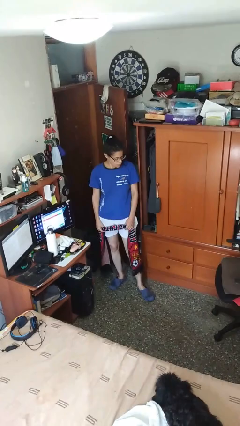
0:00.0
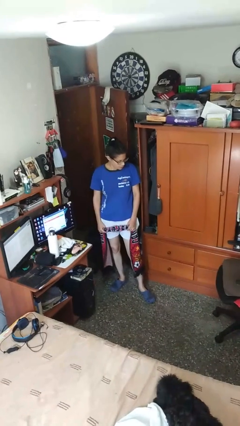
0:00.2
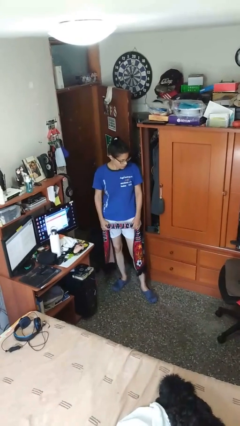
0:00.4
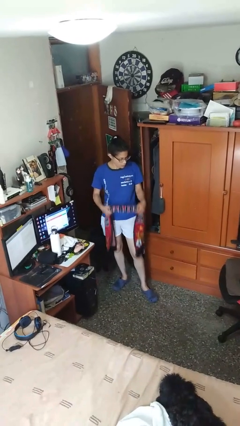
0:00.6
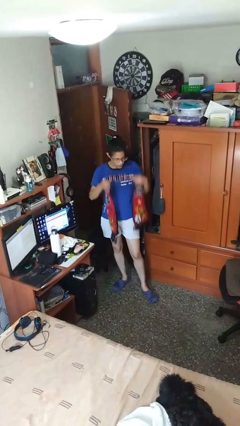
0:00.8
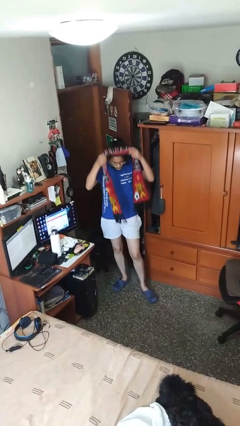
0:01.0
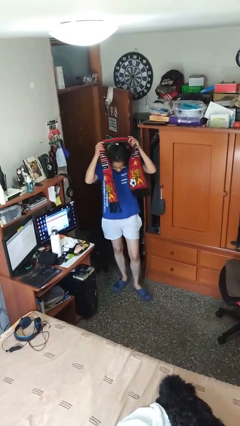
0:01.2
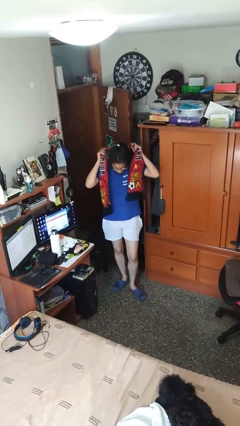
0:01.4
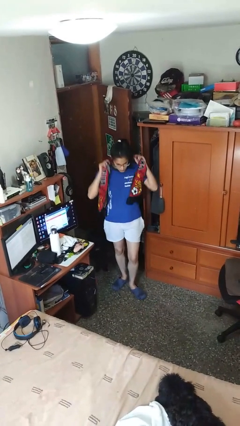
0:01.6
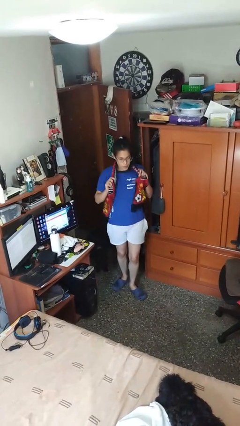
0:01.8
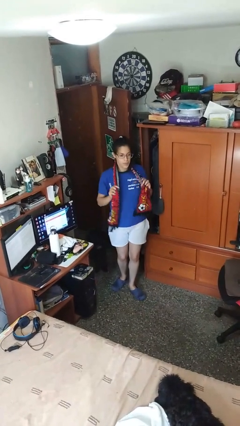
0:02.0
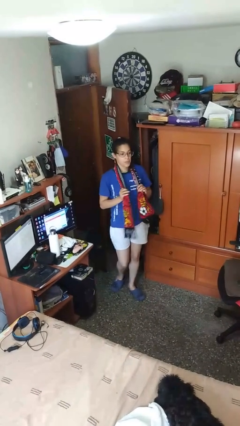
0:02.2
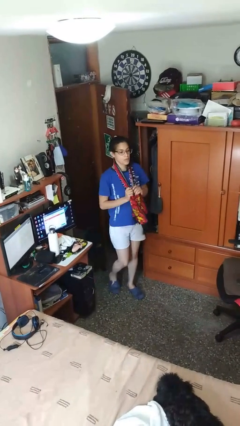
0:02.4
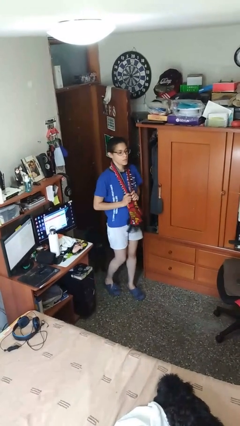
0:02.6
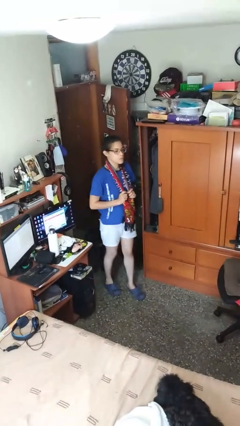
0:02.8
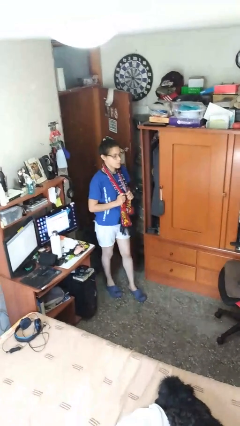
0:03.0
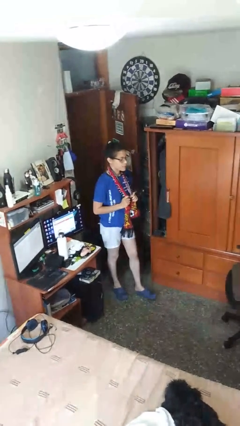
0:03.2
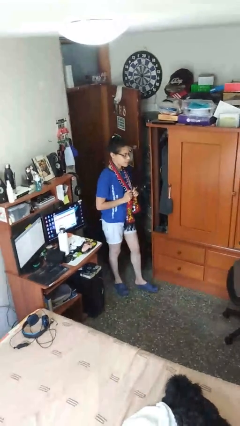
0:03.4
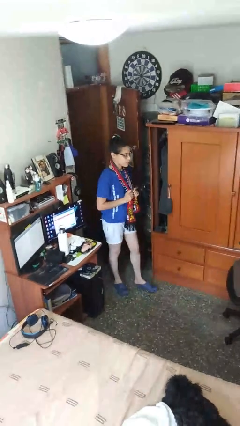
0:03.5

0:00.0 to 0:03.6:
person puts on scarf

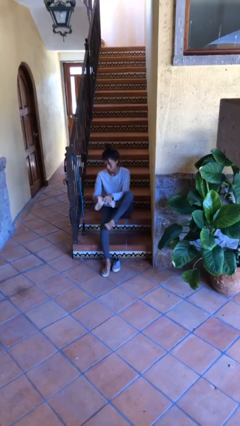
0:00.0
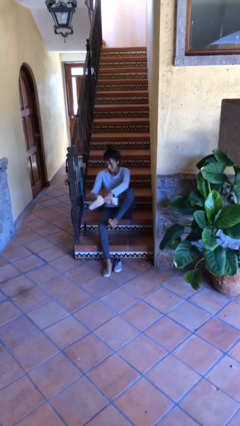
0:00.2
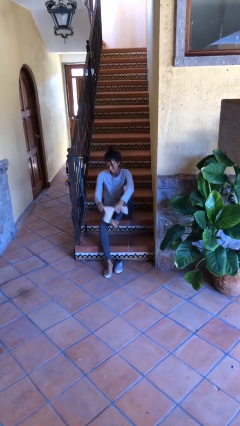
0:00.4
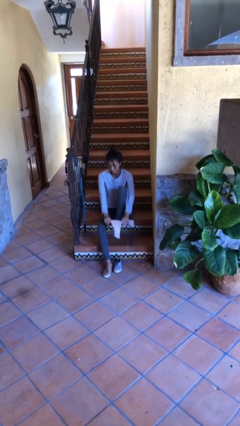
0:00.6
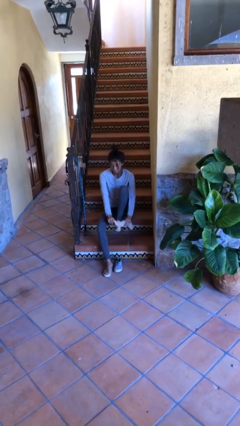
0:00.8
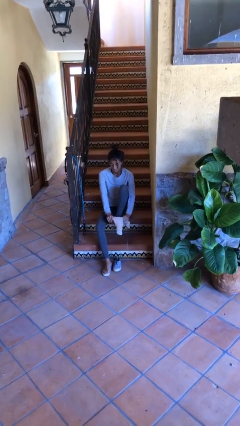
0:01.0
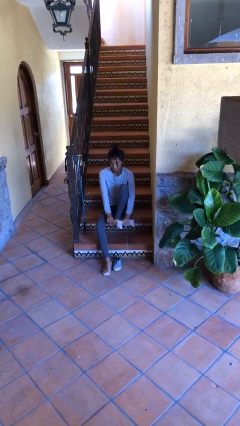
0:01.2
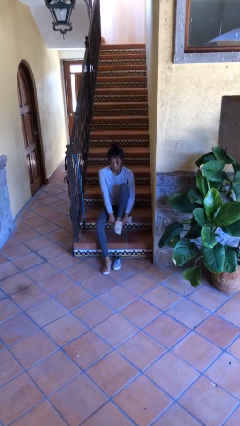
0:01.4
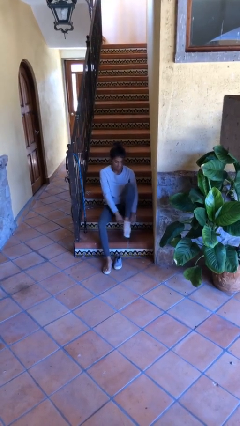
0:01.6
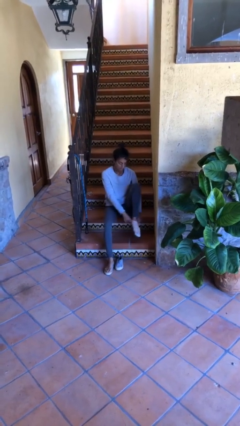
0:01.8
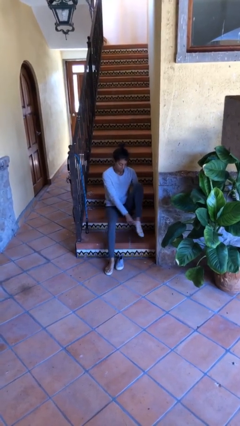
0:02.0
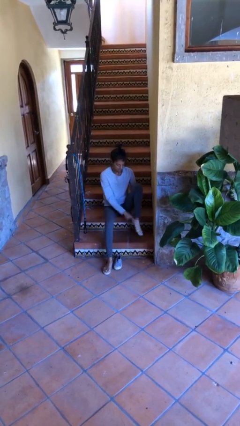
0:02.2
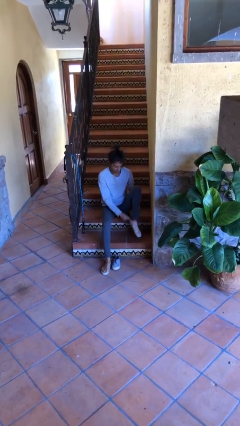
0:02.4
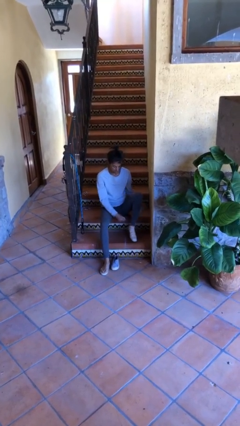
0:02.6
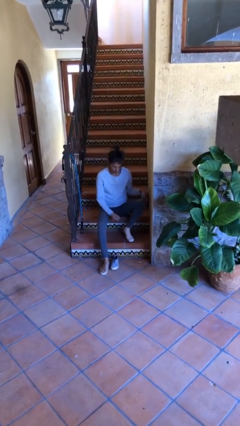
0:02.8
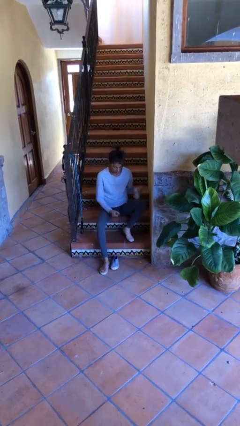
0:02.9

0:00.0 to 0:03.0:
person puts on socks

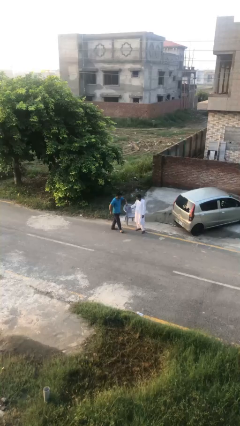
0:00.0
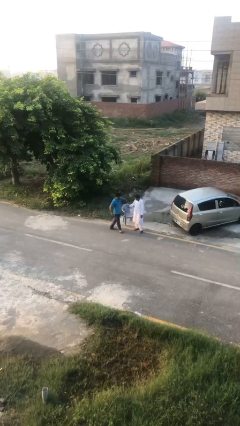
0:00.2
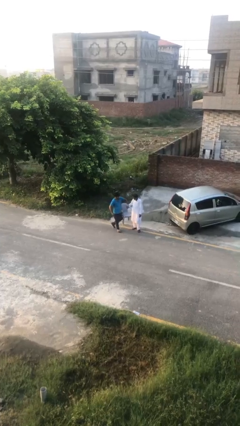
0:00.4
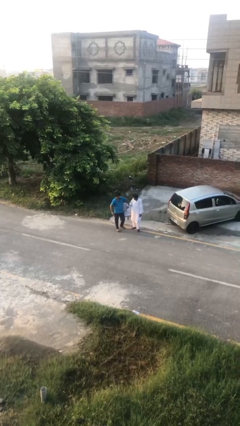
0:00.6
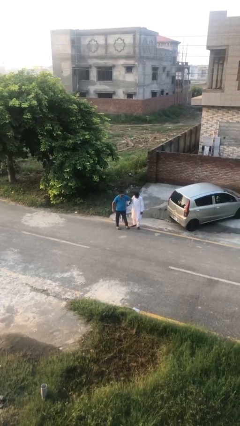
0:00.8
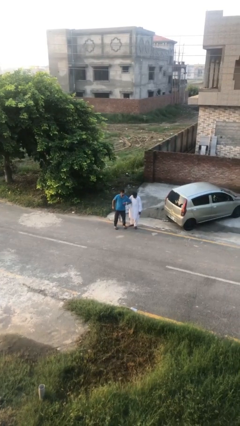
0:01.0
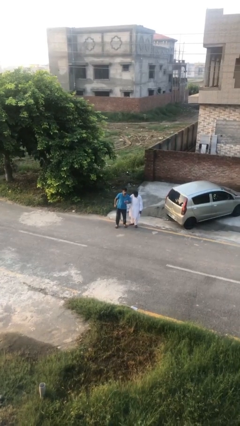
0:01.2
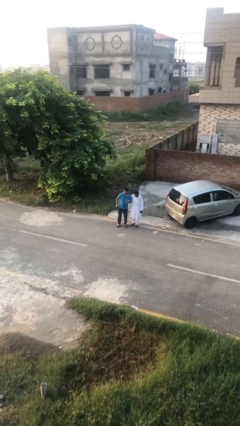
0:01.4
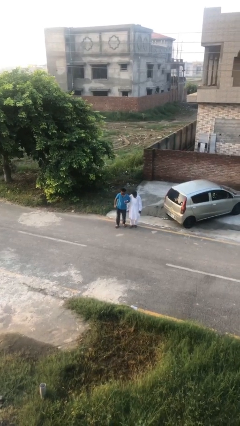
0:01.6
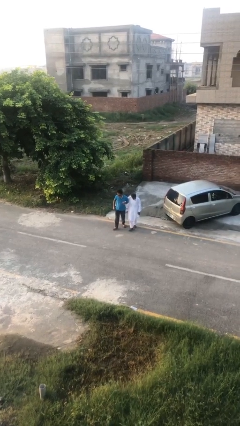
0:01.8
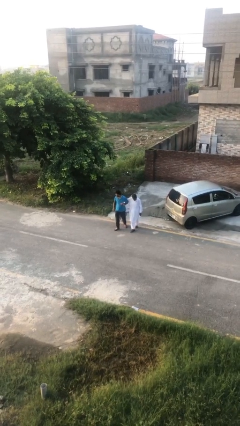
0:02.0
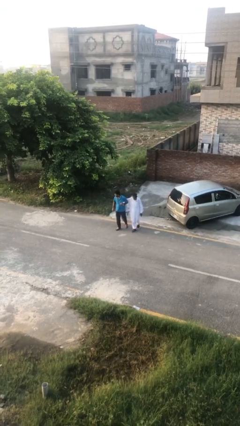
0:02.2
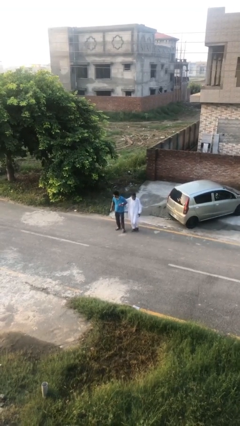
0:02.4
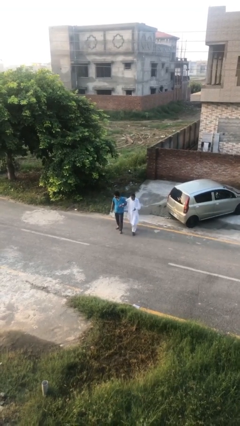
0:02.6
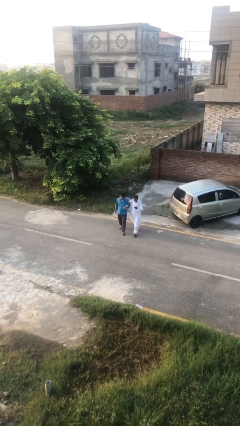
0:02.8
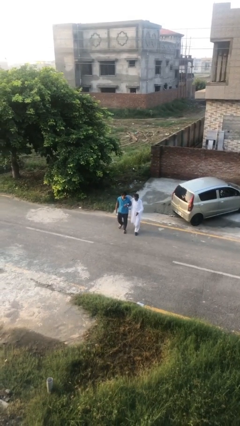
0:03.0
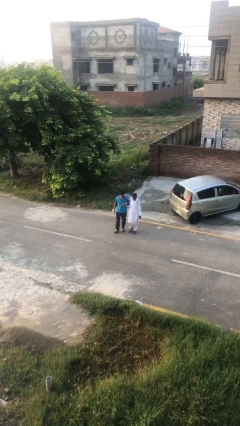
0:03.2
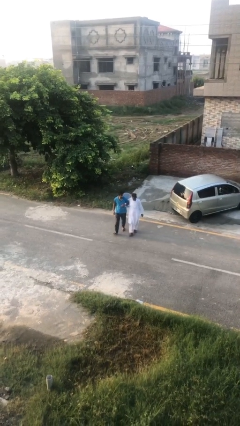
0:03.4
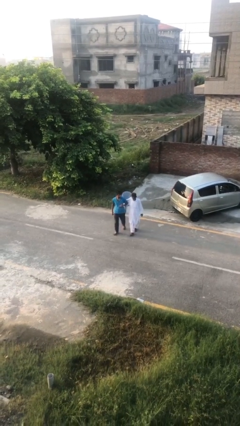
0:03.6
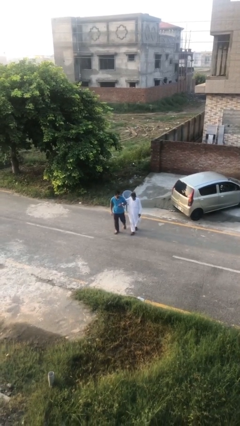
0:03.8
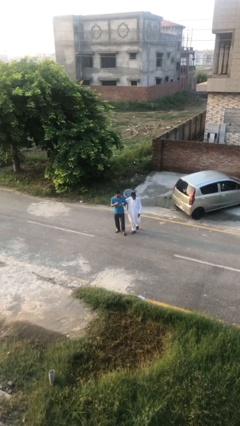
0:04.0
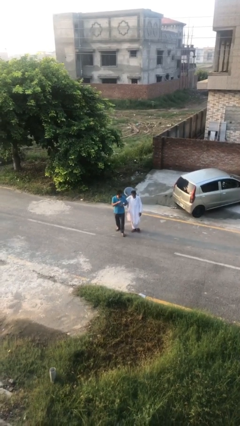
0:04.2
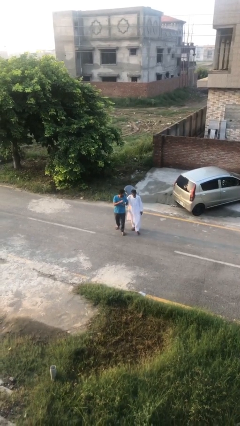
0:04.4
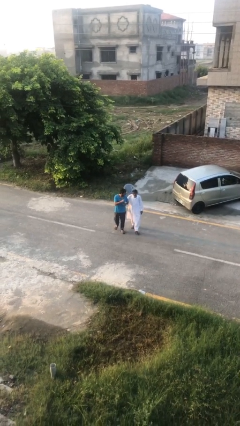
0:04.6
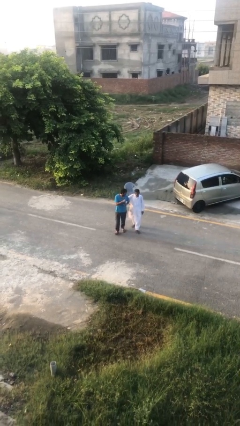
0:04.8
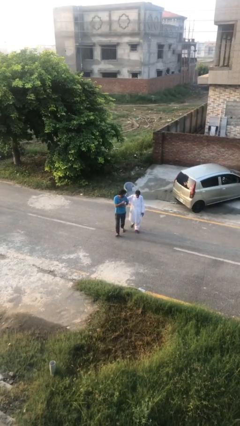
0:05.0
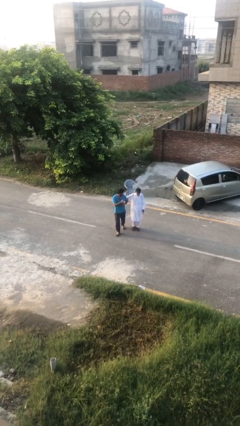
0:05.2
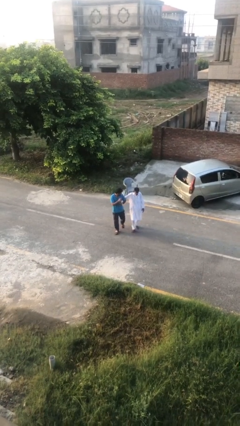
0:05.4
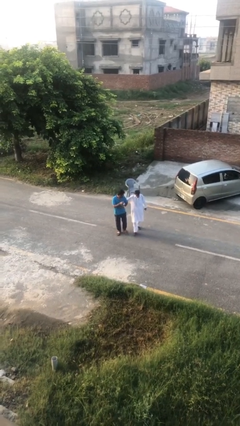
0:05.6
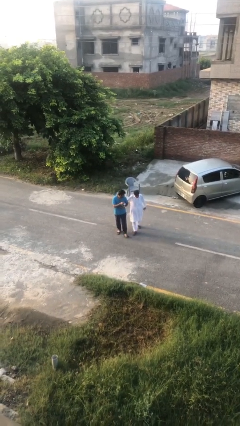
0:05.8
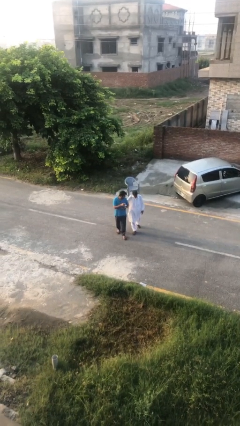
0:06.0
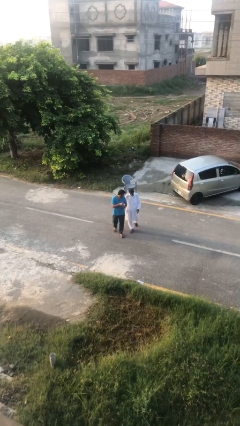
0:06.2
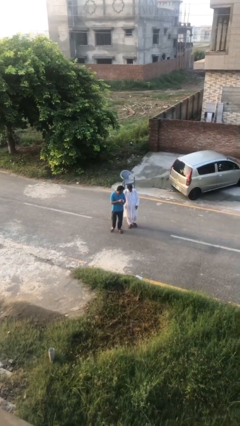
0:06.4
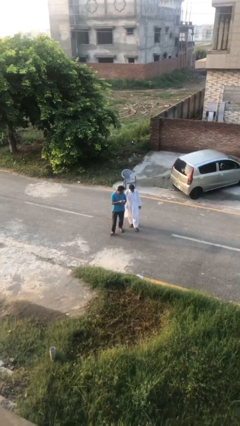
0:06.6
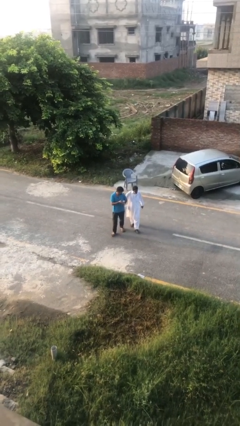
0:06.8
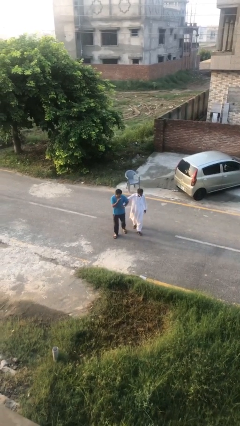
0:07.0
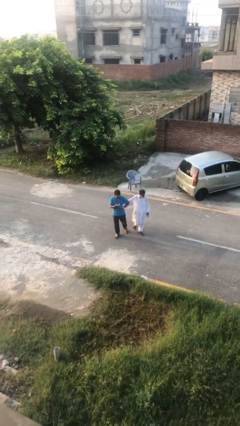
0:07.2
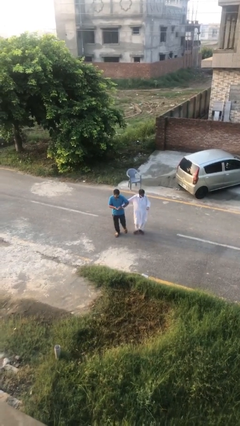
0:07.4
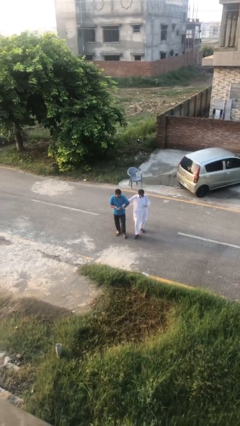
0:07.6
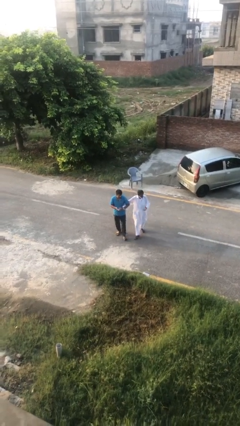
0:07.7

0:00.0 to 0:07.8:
person holds hand

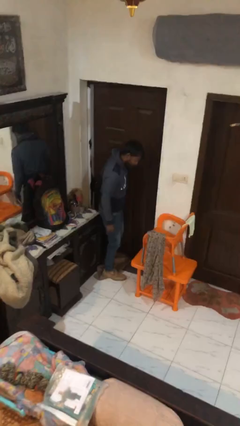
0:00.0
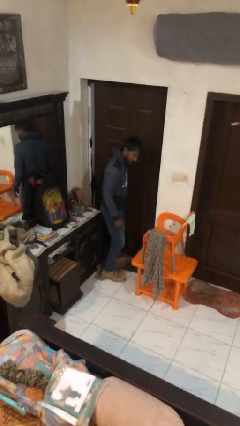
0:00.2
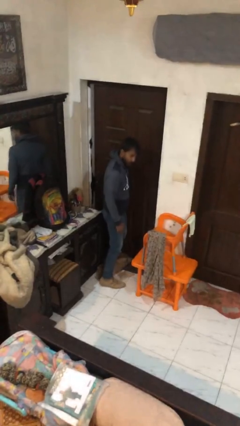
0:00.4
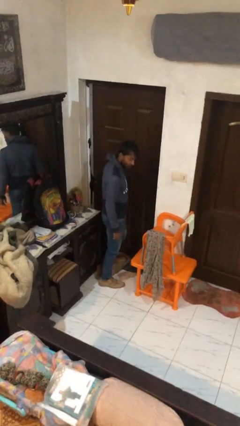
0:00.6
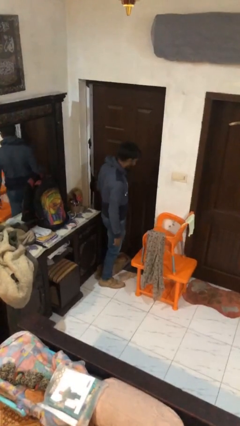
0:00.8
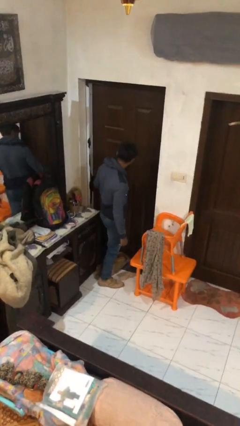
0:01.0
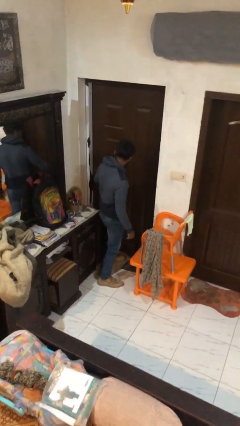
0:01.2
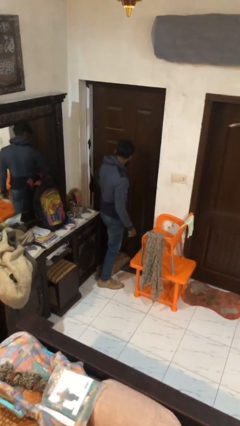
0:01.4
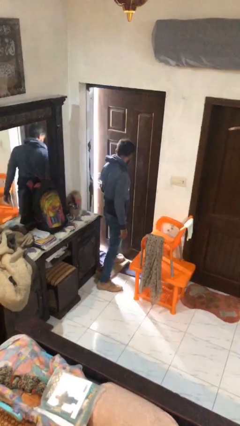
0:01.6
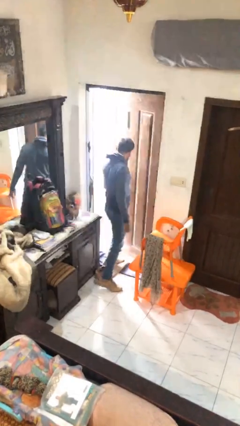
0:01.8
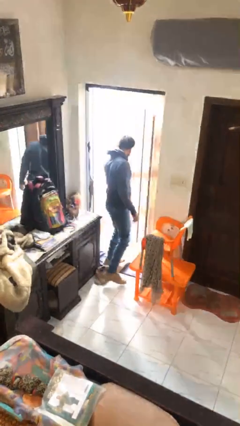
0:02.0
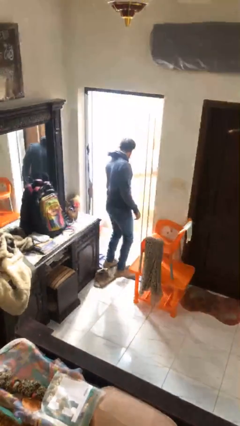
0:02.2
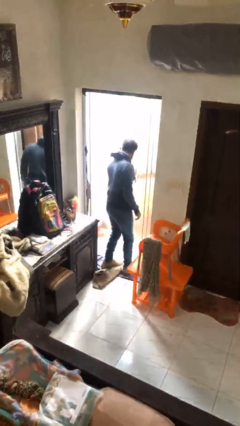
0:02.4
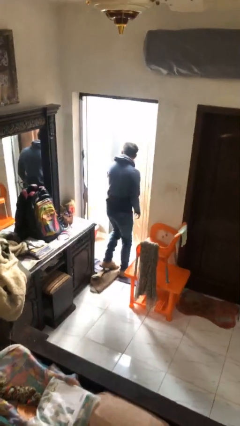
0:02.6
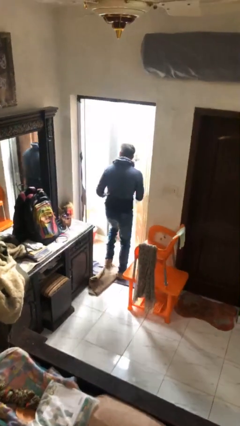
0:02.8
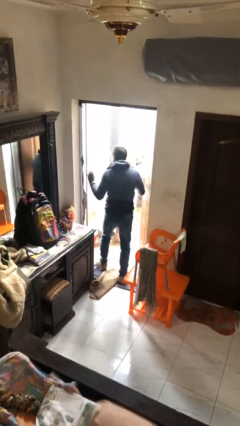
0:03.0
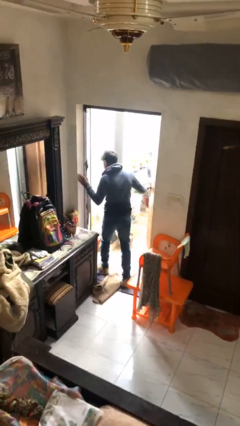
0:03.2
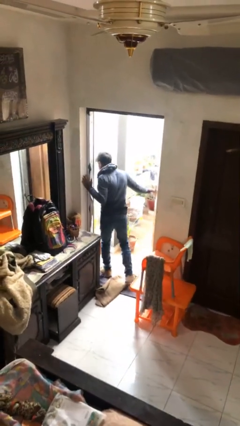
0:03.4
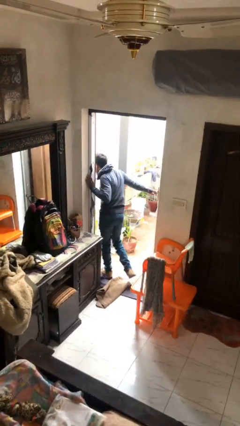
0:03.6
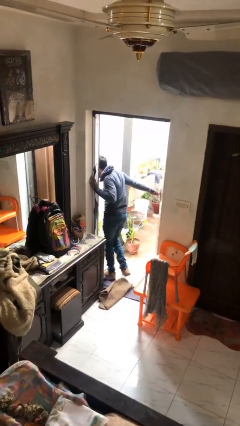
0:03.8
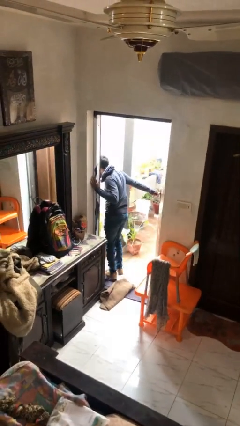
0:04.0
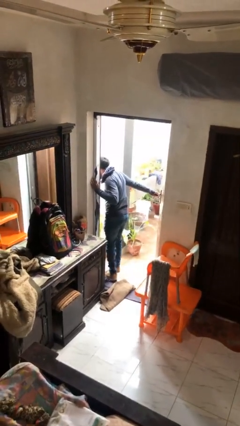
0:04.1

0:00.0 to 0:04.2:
person opens facility door
